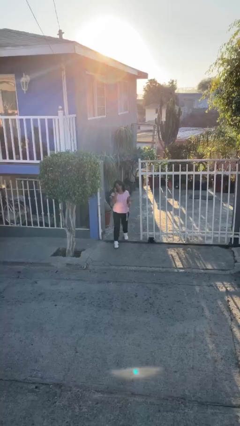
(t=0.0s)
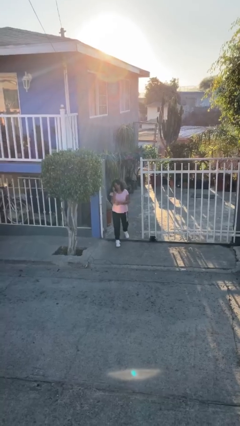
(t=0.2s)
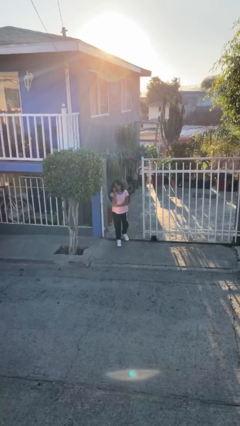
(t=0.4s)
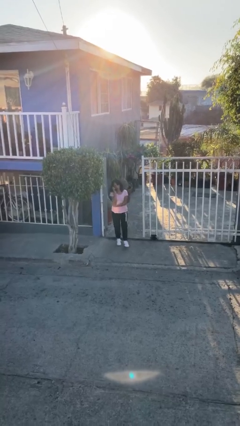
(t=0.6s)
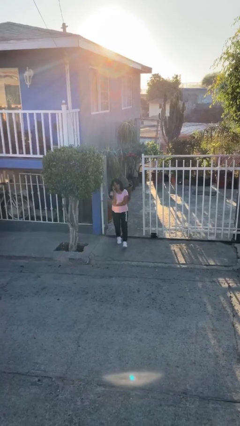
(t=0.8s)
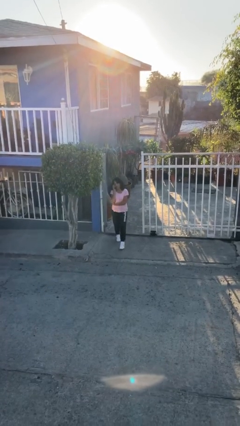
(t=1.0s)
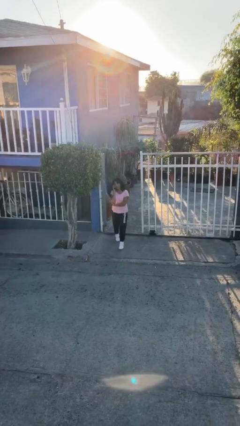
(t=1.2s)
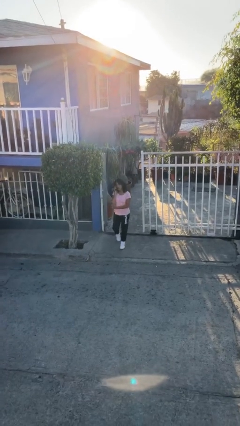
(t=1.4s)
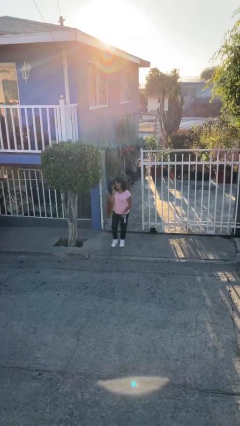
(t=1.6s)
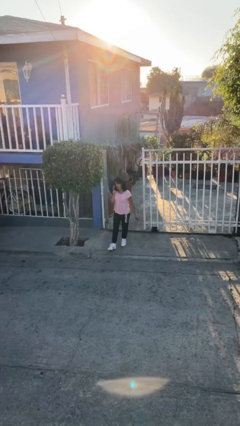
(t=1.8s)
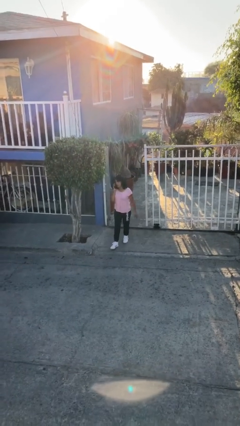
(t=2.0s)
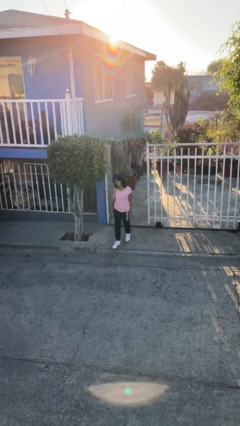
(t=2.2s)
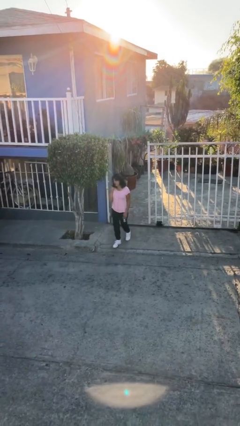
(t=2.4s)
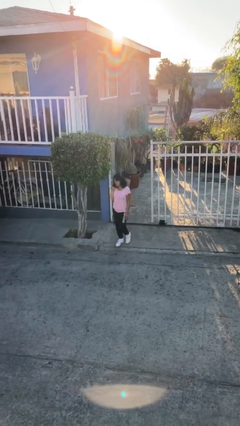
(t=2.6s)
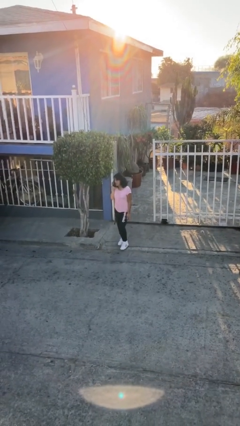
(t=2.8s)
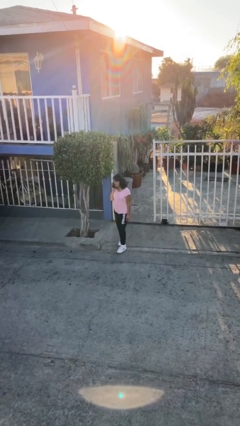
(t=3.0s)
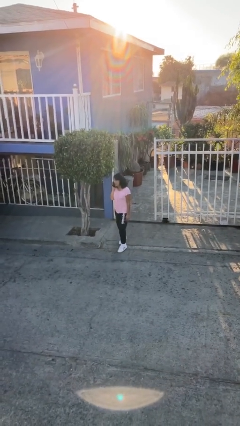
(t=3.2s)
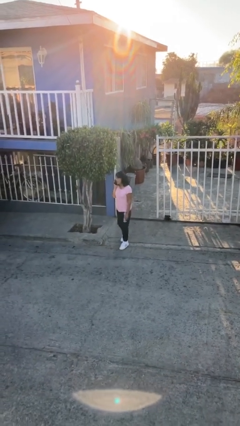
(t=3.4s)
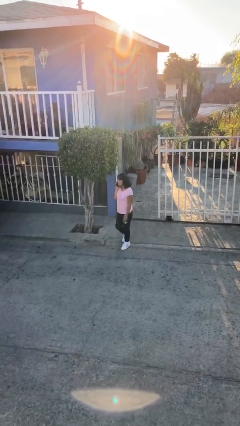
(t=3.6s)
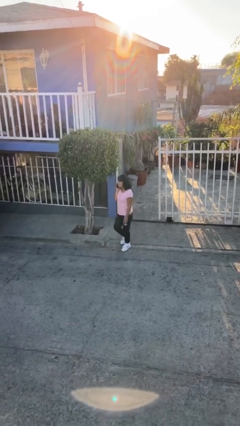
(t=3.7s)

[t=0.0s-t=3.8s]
person enters scene through structure

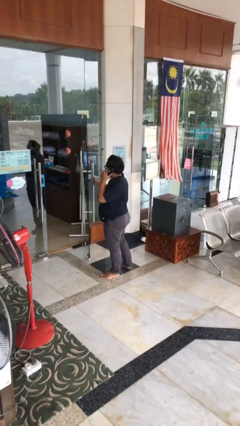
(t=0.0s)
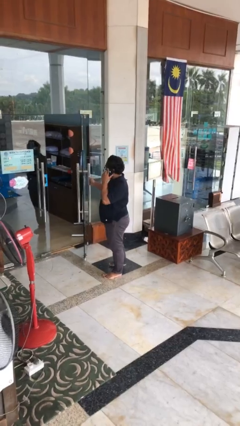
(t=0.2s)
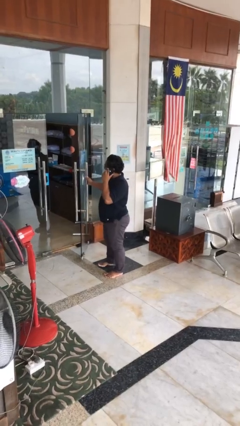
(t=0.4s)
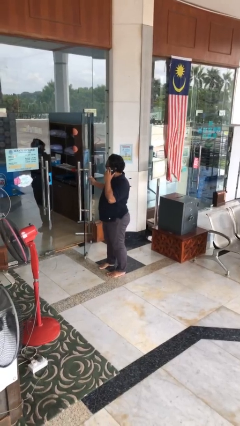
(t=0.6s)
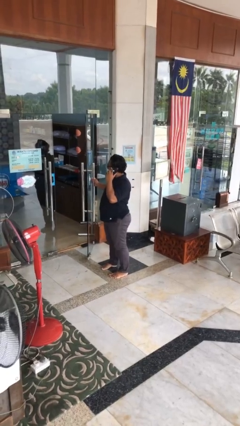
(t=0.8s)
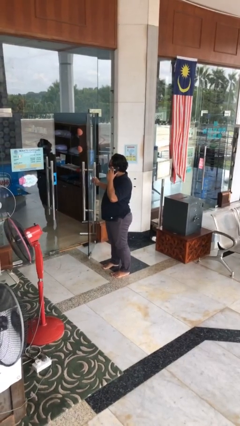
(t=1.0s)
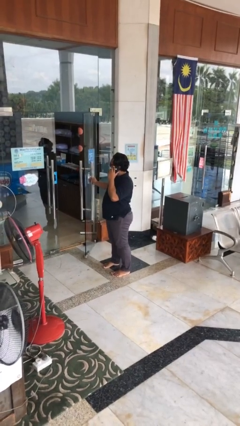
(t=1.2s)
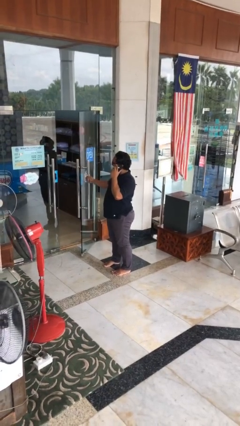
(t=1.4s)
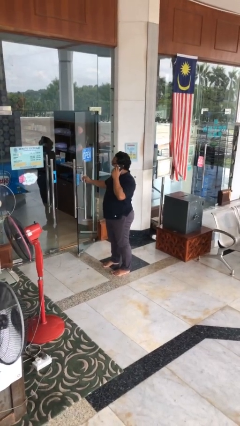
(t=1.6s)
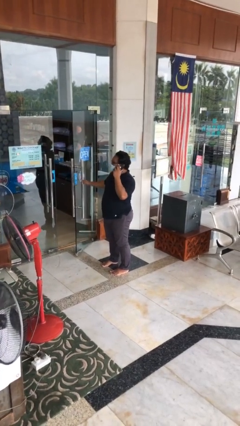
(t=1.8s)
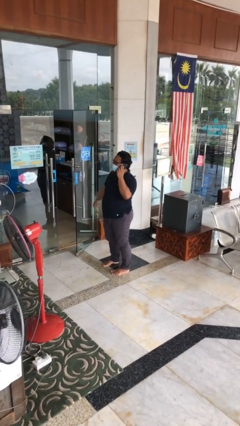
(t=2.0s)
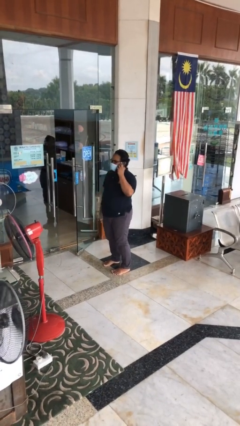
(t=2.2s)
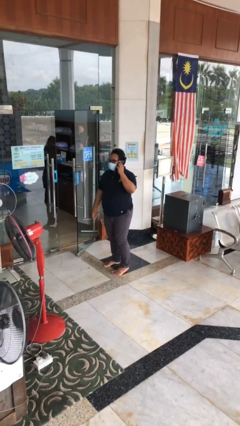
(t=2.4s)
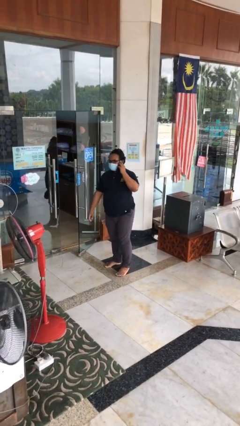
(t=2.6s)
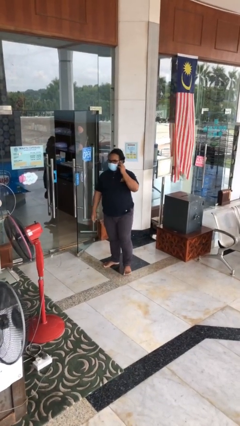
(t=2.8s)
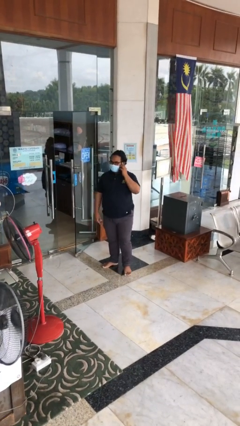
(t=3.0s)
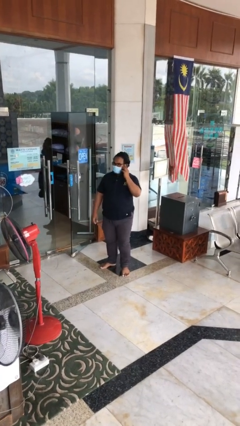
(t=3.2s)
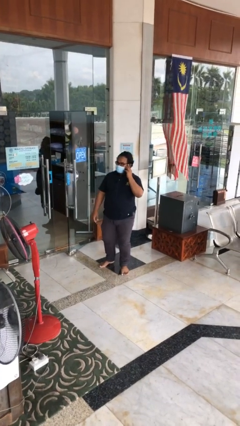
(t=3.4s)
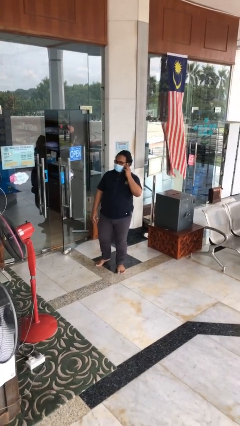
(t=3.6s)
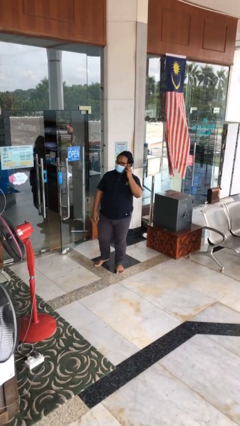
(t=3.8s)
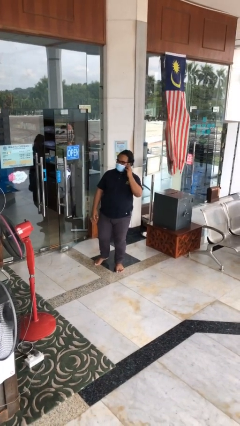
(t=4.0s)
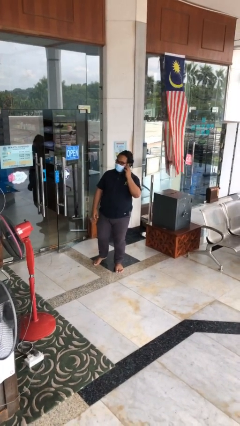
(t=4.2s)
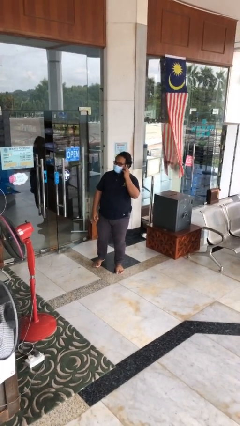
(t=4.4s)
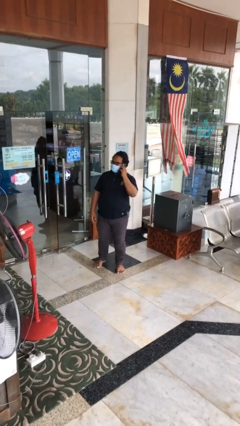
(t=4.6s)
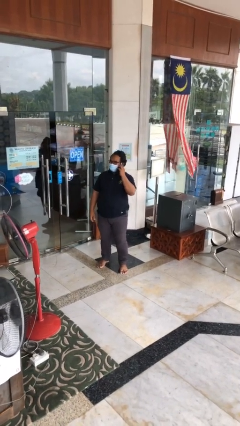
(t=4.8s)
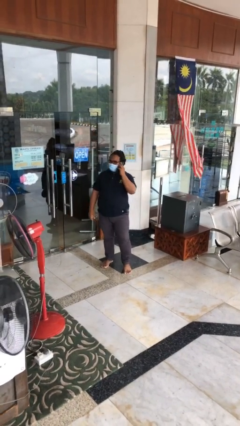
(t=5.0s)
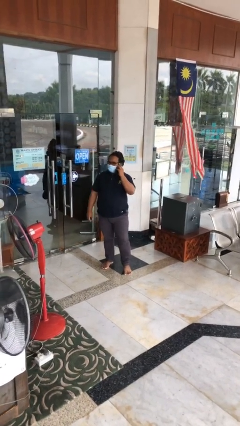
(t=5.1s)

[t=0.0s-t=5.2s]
person closes facility door

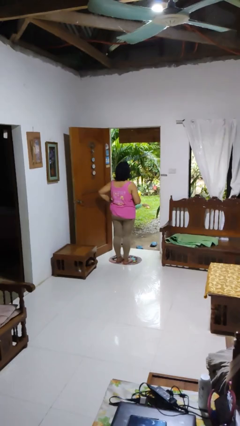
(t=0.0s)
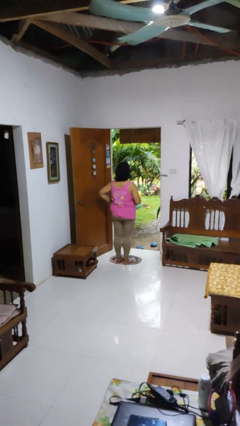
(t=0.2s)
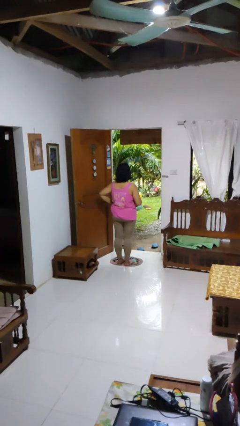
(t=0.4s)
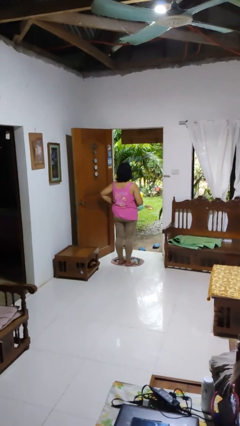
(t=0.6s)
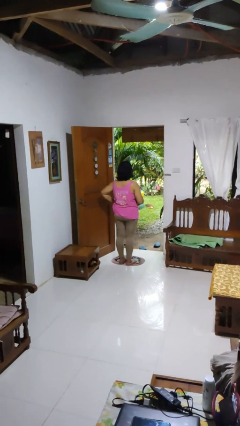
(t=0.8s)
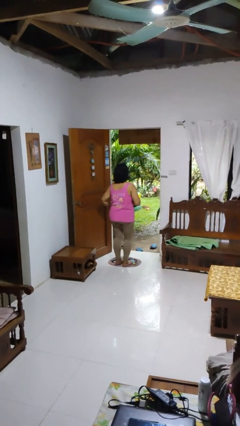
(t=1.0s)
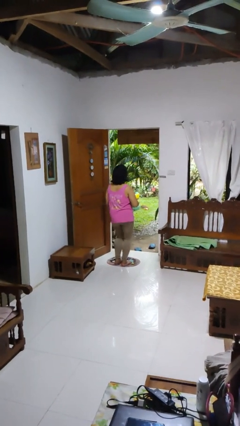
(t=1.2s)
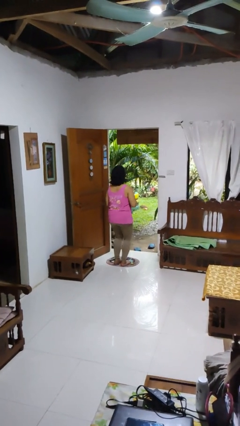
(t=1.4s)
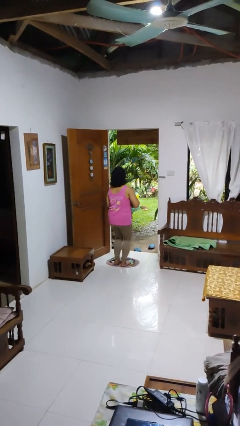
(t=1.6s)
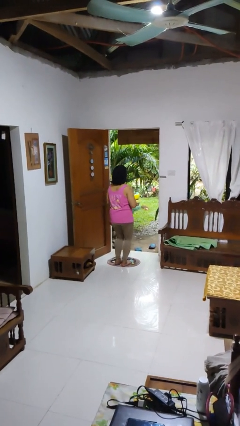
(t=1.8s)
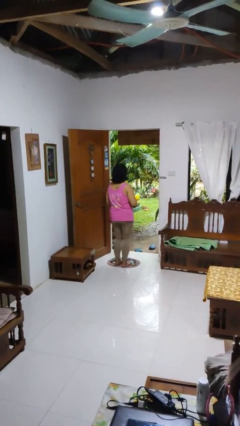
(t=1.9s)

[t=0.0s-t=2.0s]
person wiggles hips

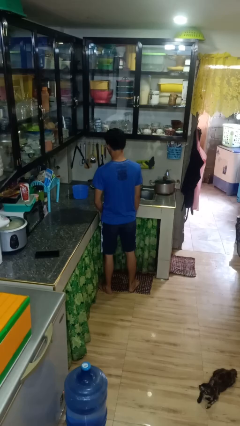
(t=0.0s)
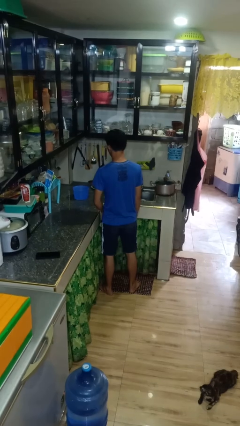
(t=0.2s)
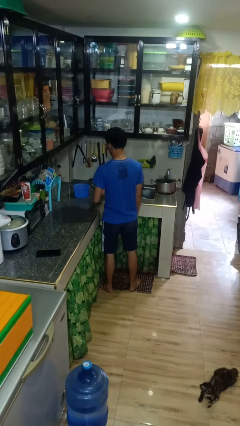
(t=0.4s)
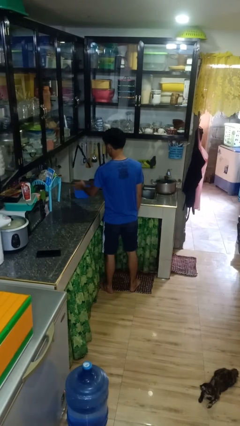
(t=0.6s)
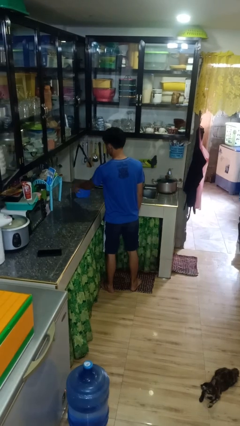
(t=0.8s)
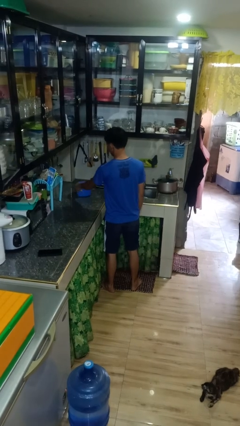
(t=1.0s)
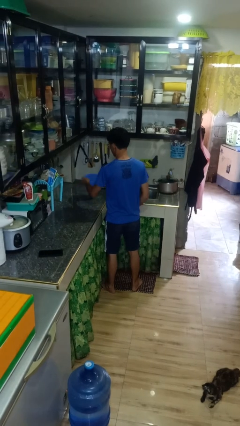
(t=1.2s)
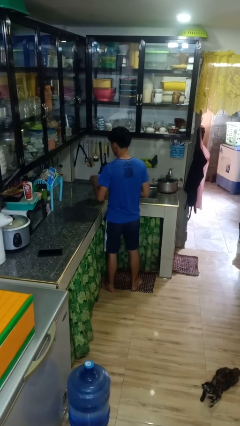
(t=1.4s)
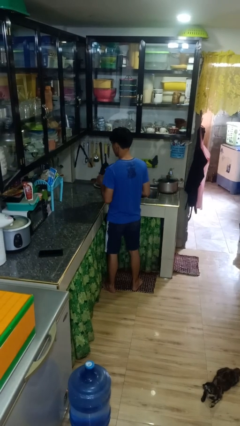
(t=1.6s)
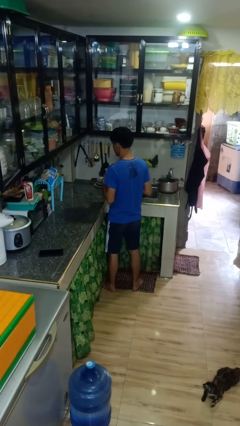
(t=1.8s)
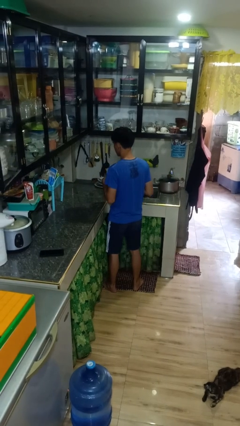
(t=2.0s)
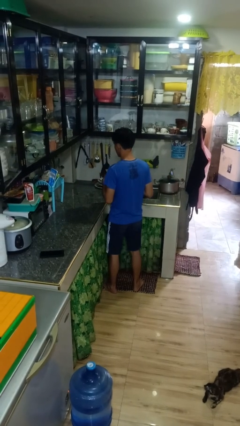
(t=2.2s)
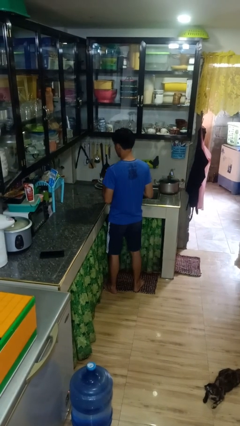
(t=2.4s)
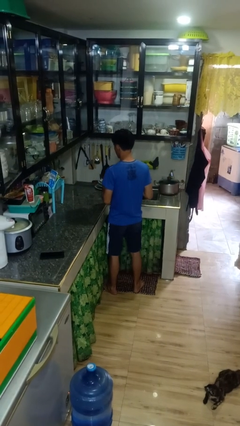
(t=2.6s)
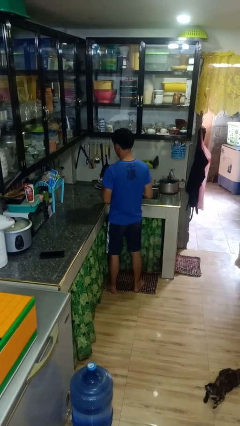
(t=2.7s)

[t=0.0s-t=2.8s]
person picks up object from countertop

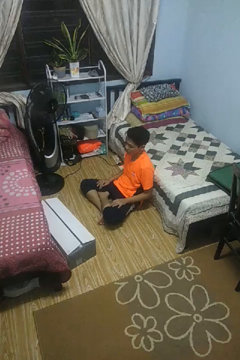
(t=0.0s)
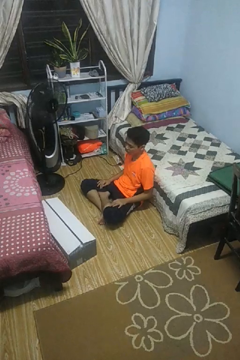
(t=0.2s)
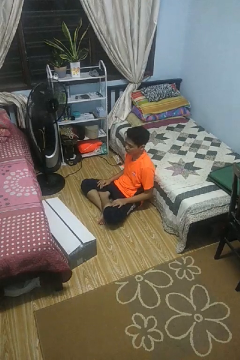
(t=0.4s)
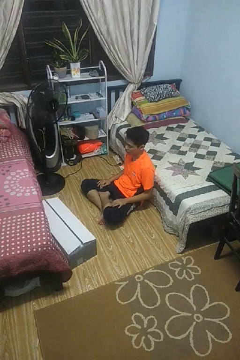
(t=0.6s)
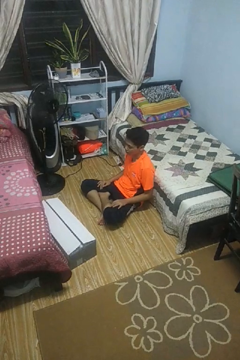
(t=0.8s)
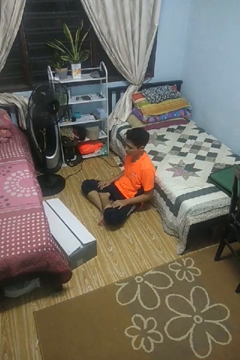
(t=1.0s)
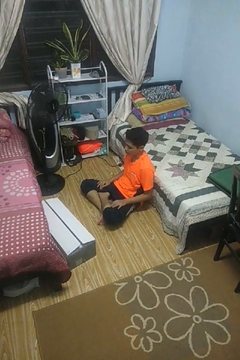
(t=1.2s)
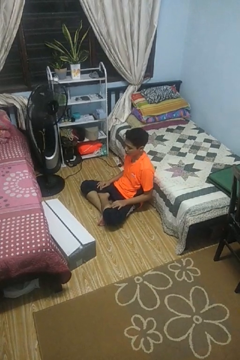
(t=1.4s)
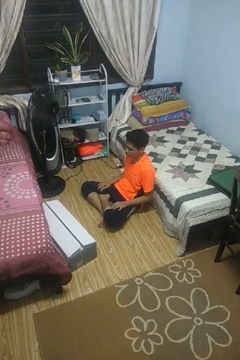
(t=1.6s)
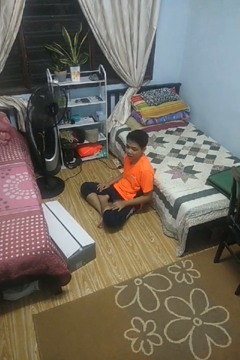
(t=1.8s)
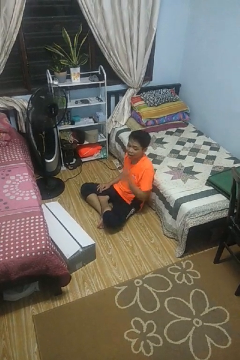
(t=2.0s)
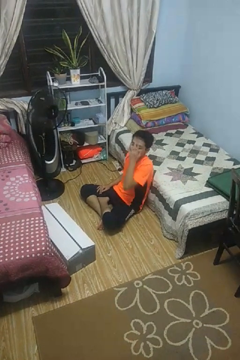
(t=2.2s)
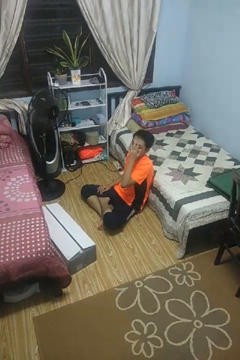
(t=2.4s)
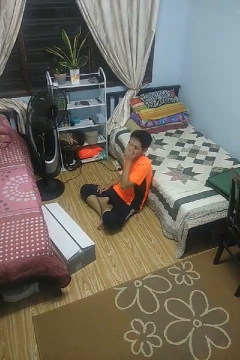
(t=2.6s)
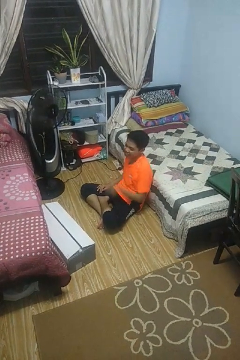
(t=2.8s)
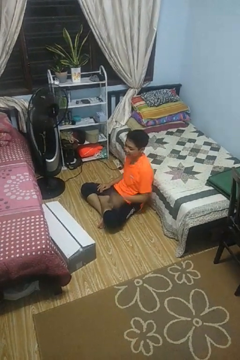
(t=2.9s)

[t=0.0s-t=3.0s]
person covers face with hands

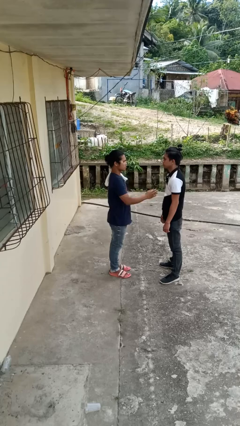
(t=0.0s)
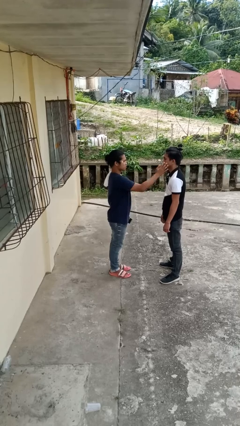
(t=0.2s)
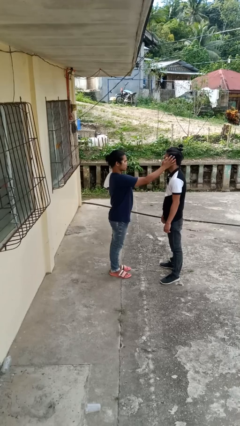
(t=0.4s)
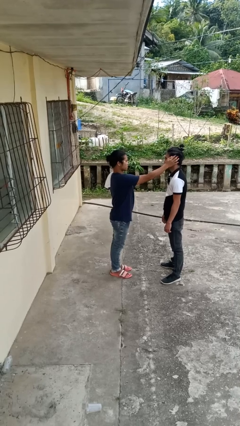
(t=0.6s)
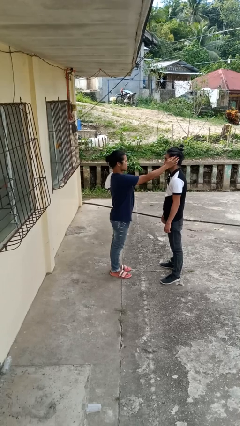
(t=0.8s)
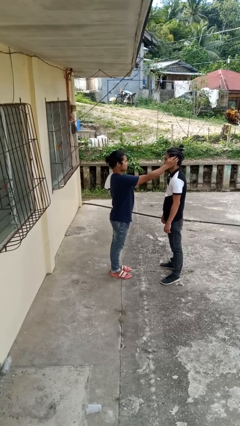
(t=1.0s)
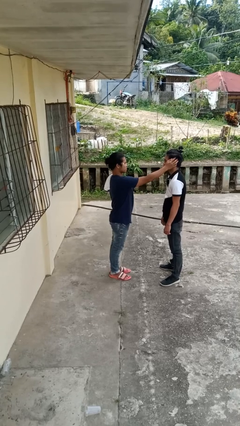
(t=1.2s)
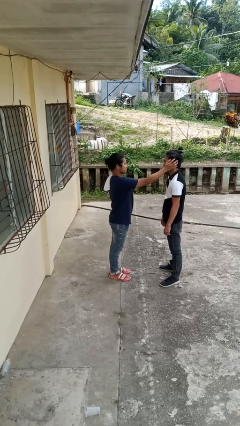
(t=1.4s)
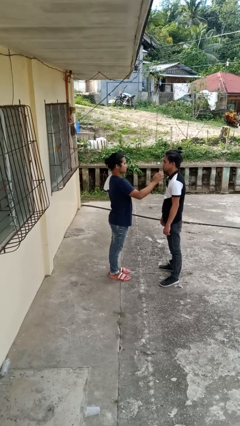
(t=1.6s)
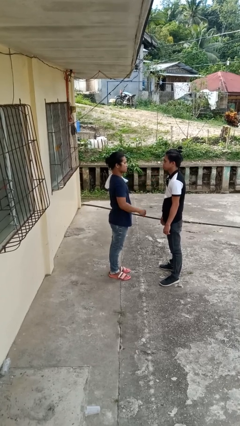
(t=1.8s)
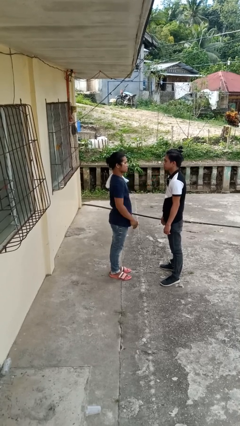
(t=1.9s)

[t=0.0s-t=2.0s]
person touches face of person
